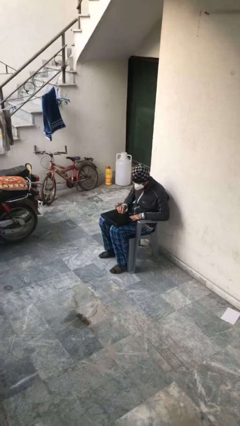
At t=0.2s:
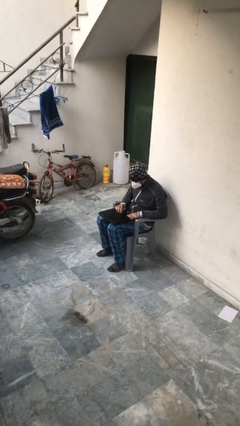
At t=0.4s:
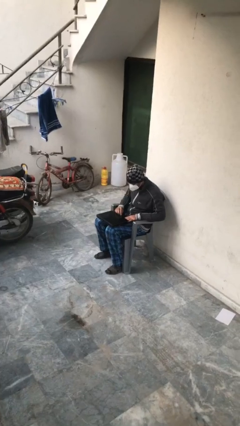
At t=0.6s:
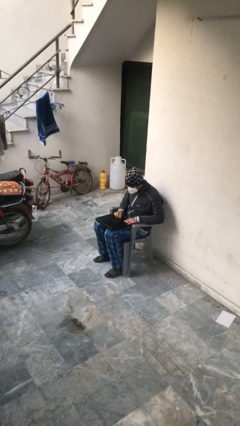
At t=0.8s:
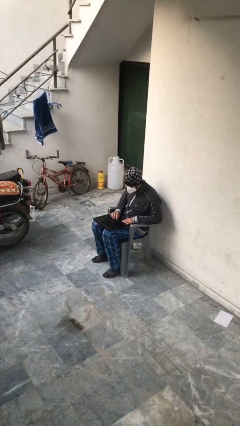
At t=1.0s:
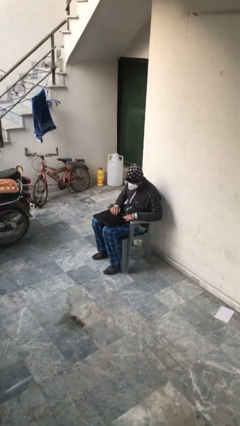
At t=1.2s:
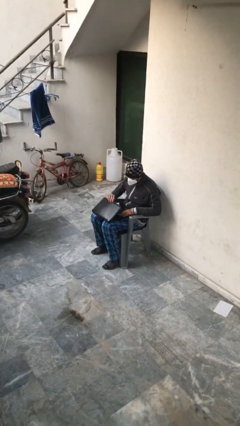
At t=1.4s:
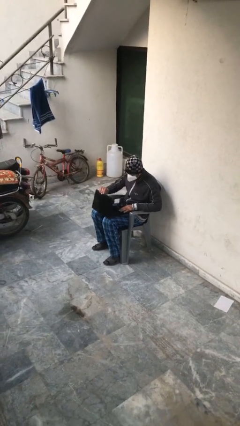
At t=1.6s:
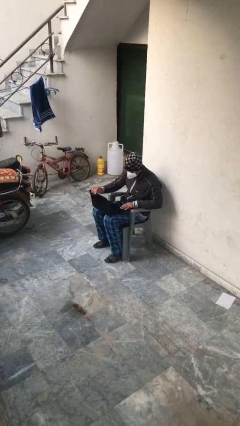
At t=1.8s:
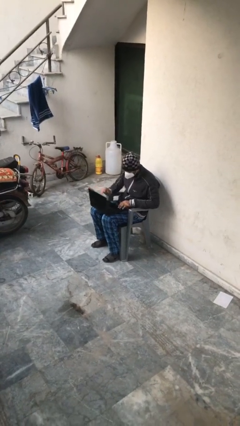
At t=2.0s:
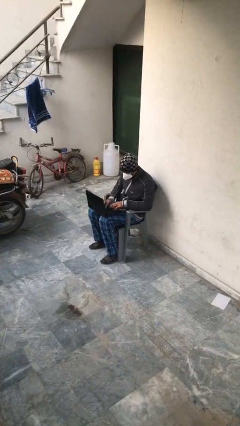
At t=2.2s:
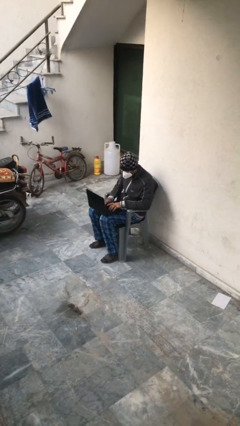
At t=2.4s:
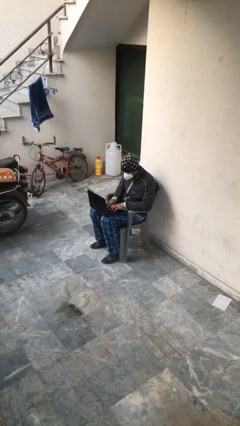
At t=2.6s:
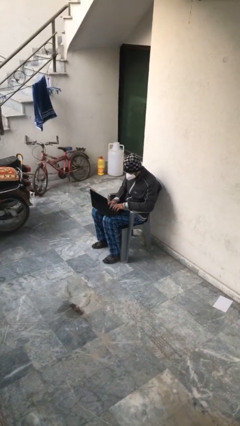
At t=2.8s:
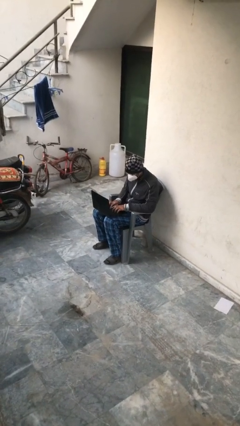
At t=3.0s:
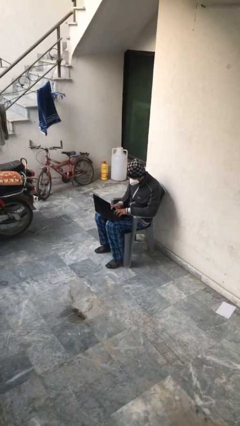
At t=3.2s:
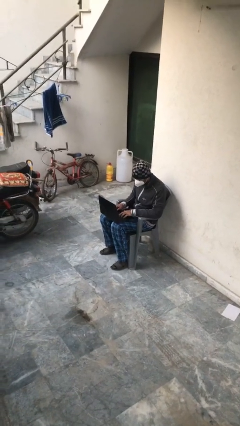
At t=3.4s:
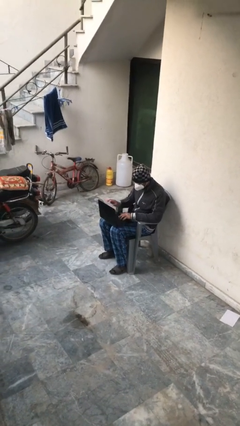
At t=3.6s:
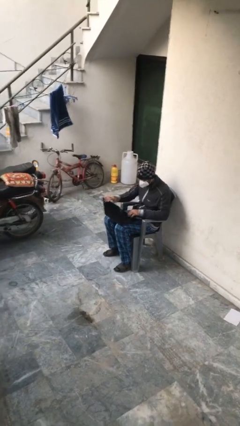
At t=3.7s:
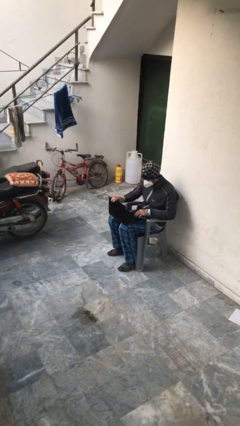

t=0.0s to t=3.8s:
person interacts with laptop

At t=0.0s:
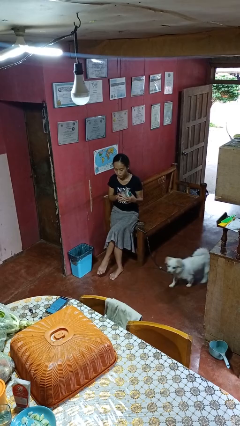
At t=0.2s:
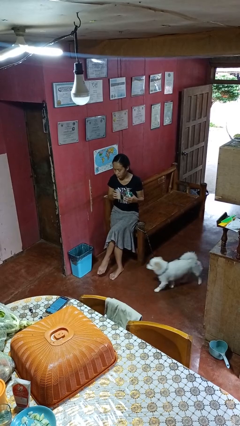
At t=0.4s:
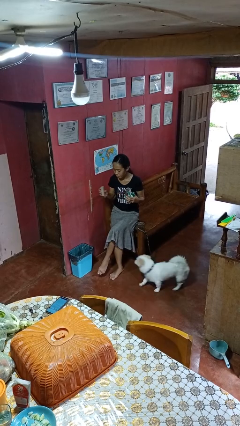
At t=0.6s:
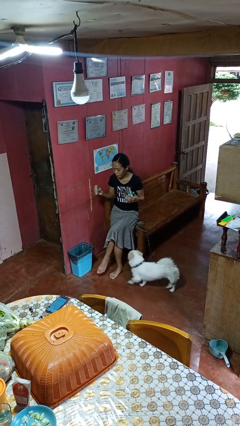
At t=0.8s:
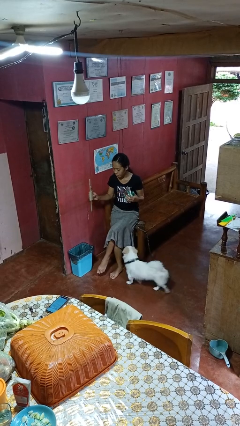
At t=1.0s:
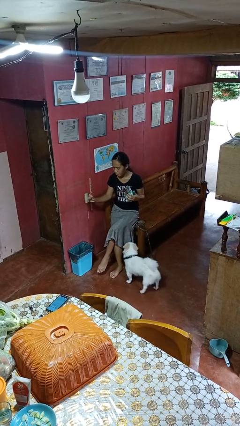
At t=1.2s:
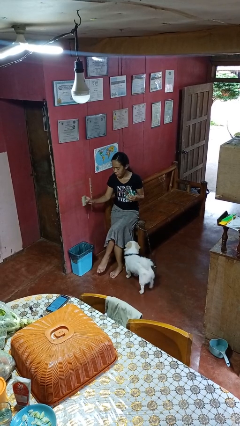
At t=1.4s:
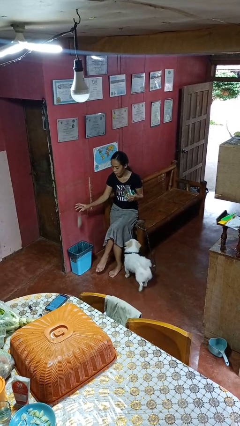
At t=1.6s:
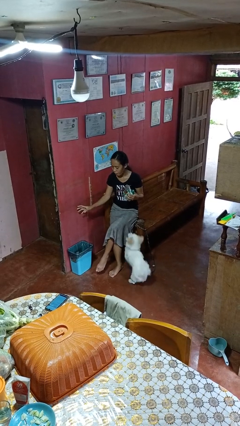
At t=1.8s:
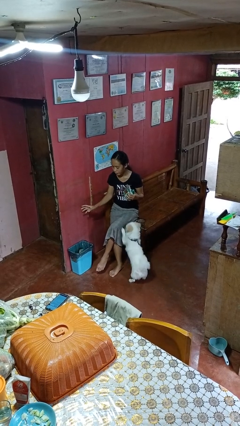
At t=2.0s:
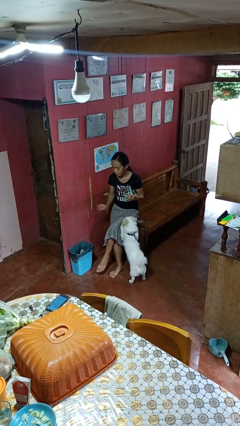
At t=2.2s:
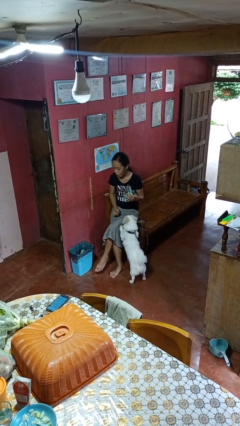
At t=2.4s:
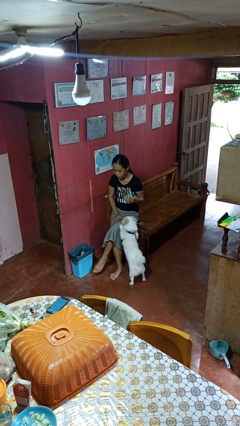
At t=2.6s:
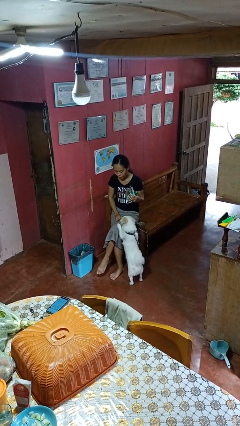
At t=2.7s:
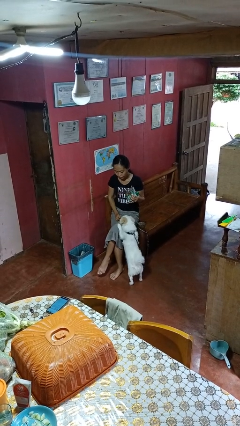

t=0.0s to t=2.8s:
person discards trash

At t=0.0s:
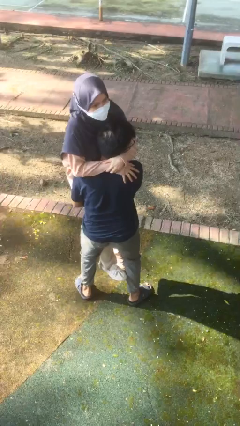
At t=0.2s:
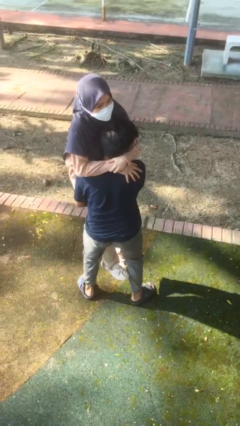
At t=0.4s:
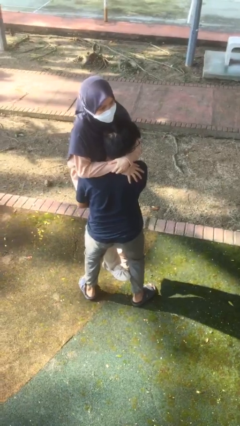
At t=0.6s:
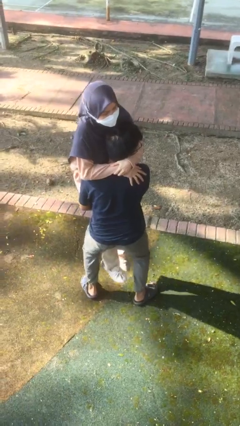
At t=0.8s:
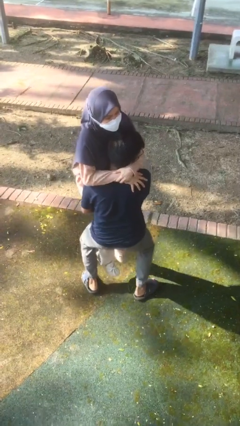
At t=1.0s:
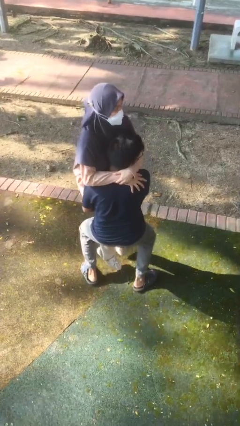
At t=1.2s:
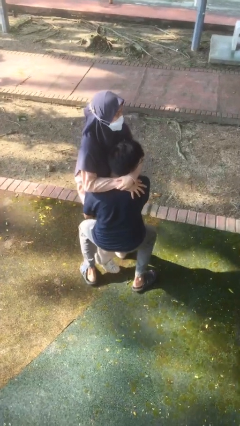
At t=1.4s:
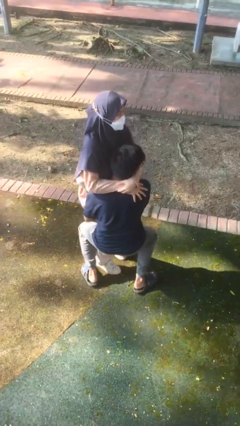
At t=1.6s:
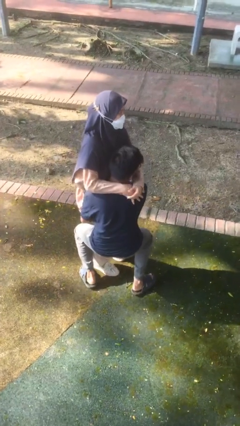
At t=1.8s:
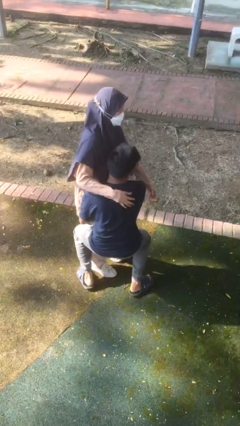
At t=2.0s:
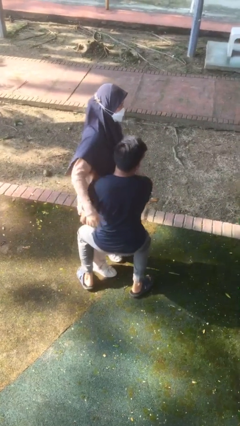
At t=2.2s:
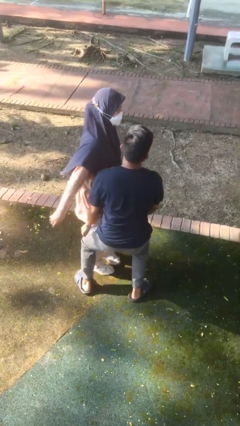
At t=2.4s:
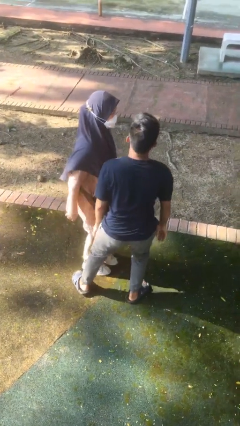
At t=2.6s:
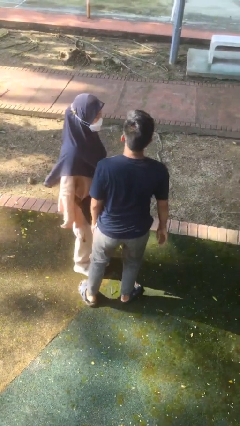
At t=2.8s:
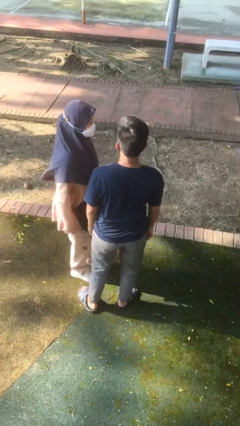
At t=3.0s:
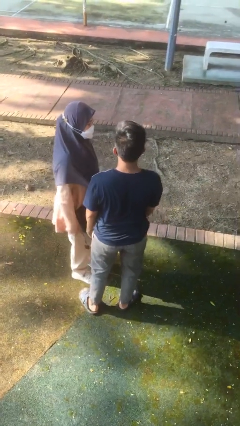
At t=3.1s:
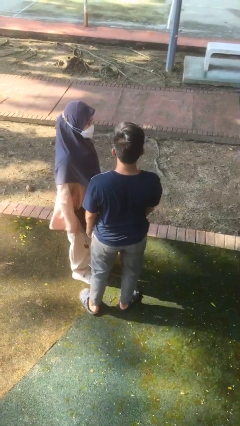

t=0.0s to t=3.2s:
person puts down person

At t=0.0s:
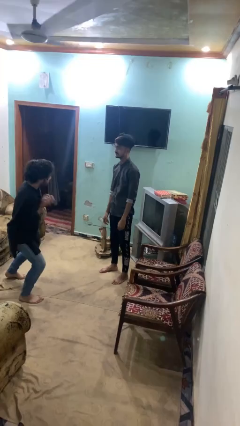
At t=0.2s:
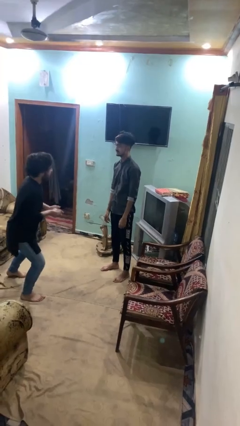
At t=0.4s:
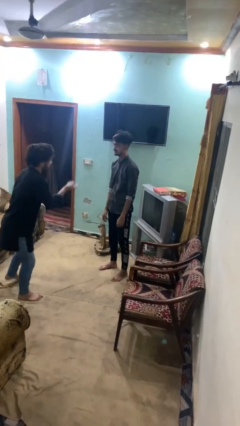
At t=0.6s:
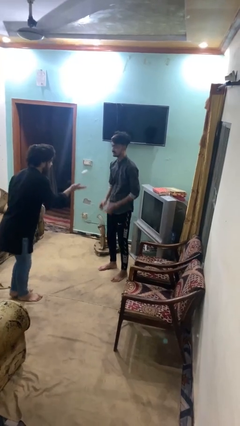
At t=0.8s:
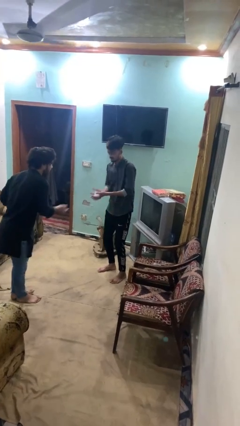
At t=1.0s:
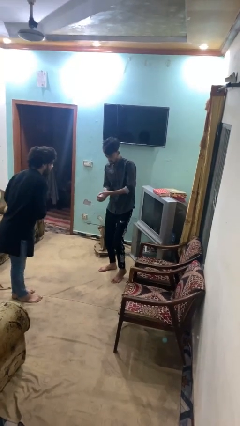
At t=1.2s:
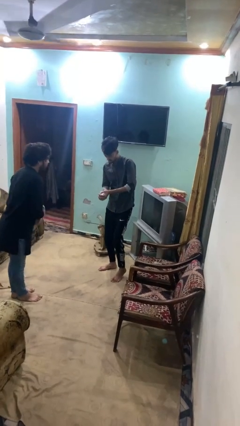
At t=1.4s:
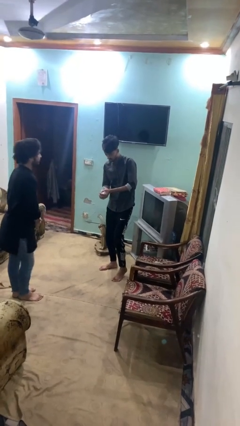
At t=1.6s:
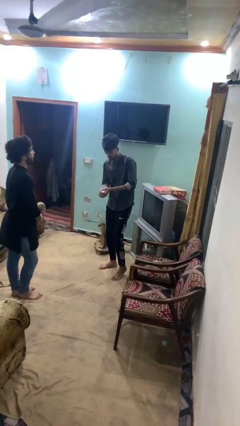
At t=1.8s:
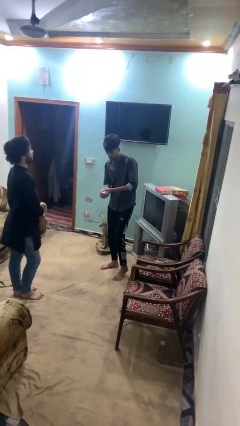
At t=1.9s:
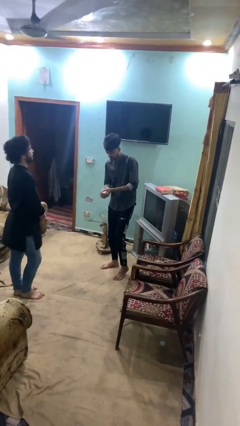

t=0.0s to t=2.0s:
person catches object from person

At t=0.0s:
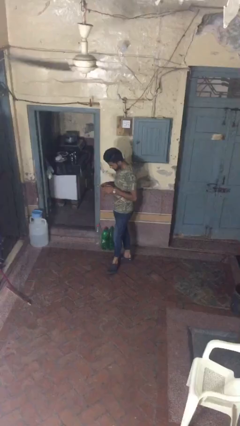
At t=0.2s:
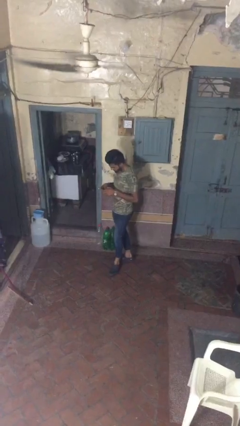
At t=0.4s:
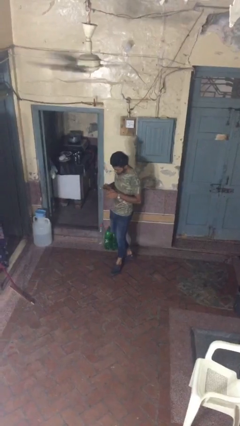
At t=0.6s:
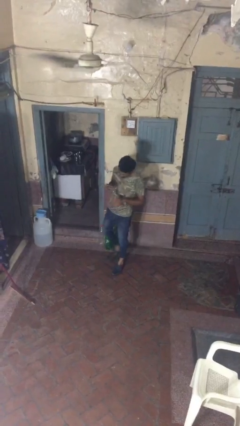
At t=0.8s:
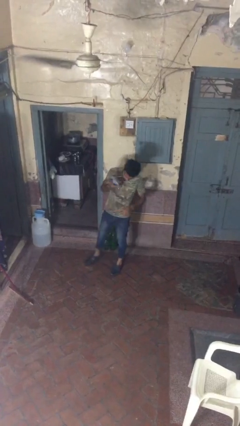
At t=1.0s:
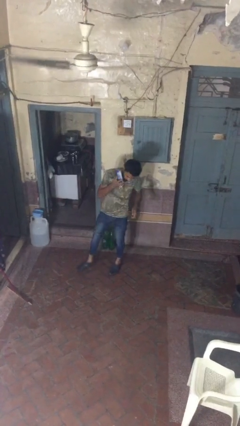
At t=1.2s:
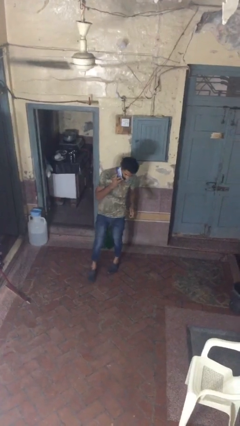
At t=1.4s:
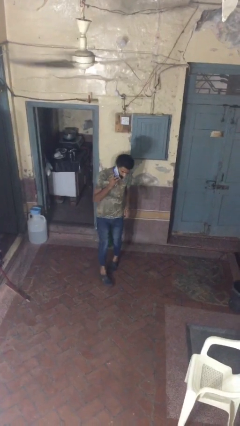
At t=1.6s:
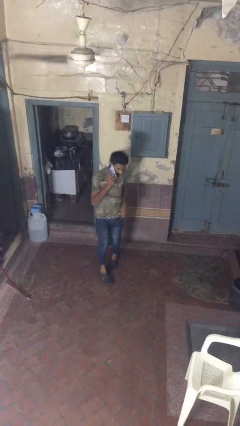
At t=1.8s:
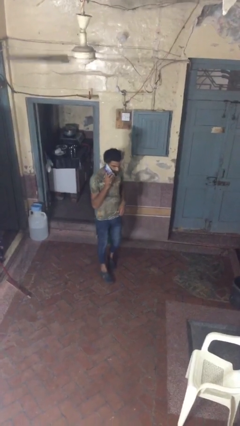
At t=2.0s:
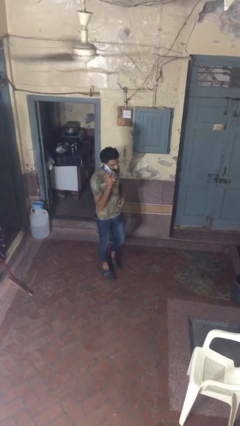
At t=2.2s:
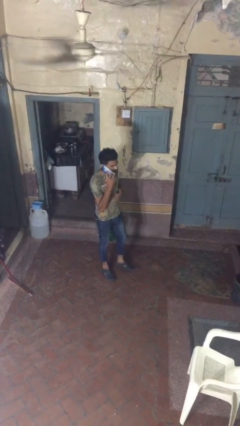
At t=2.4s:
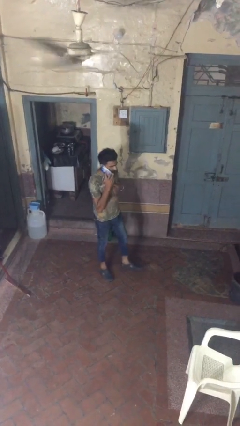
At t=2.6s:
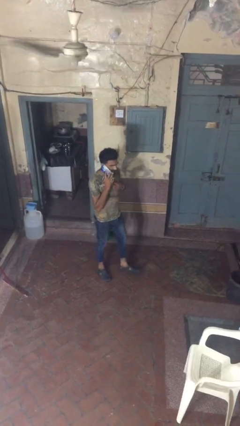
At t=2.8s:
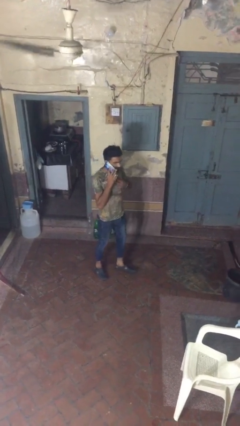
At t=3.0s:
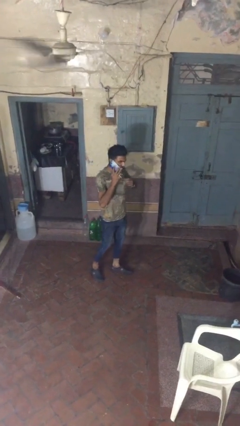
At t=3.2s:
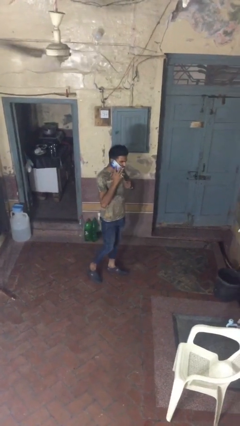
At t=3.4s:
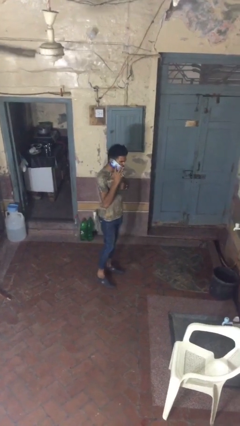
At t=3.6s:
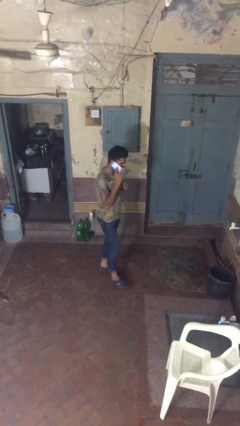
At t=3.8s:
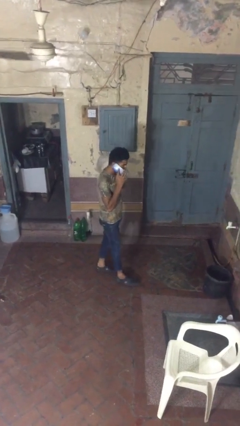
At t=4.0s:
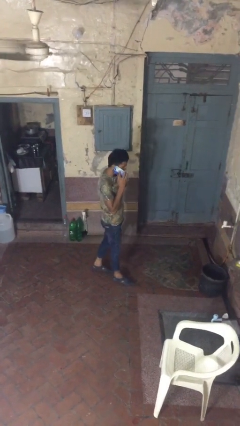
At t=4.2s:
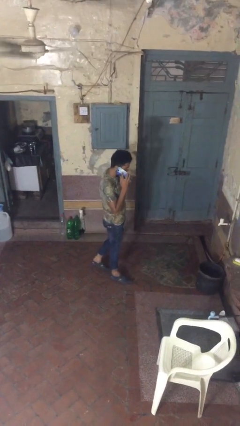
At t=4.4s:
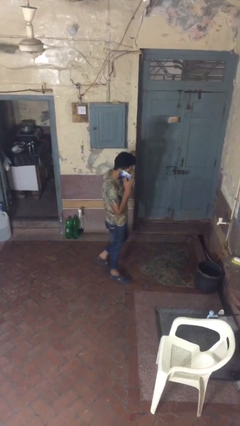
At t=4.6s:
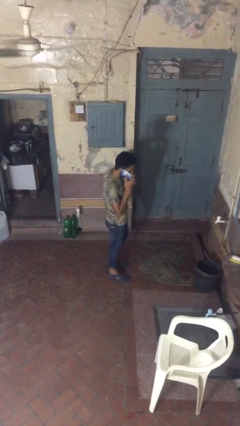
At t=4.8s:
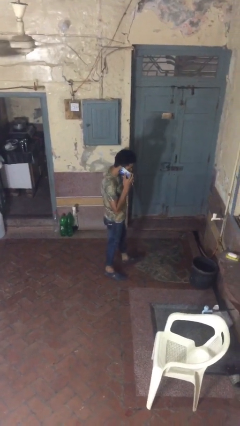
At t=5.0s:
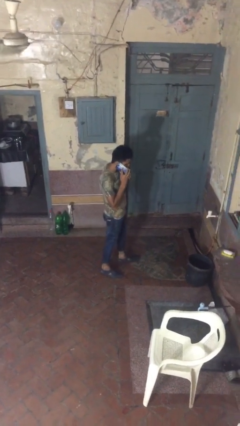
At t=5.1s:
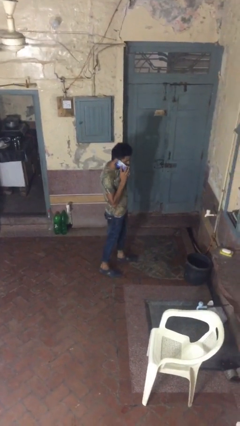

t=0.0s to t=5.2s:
person talks on phone
